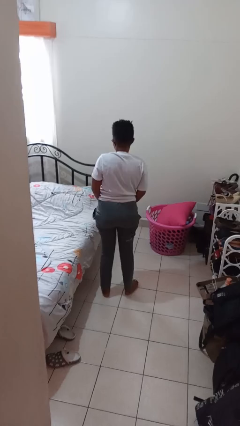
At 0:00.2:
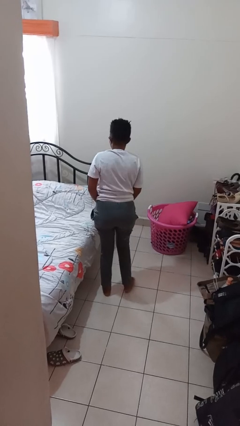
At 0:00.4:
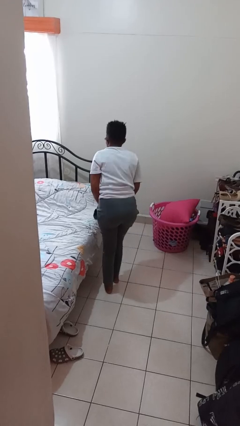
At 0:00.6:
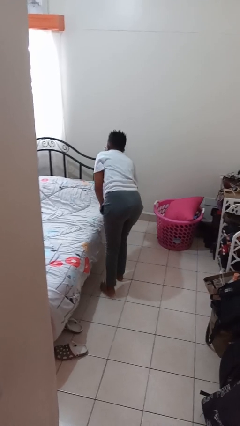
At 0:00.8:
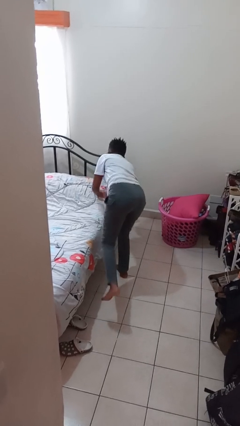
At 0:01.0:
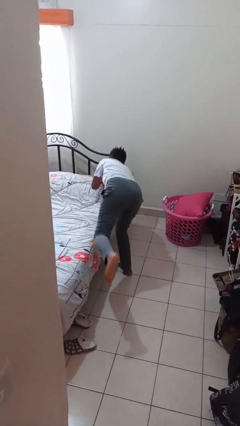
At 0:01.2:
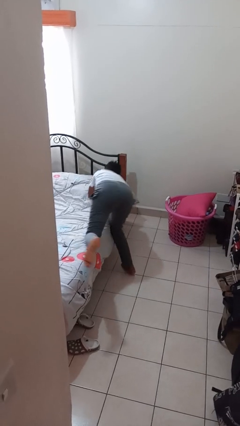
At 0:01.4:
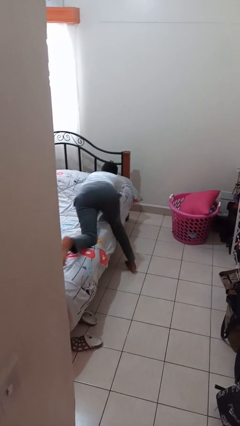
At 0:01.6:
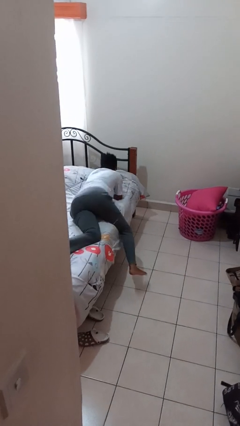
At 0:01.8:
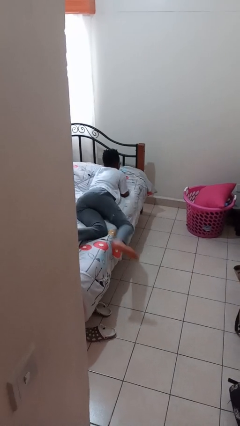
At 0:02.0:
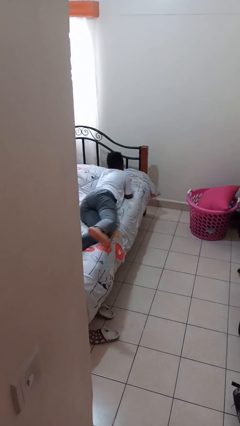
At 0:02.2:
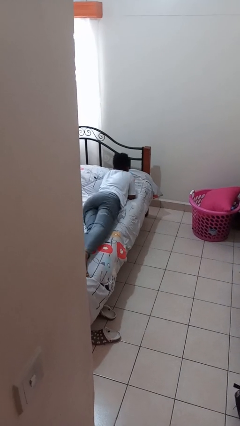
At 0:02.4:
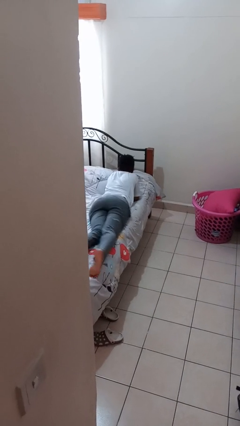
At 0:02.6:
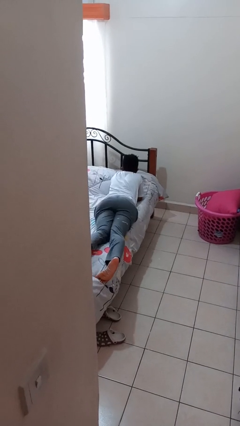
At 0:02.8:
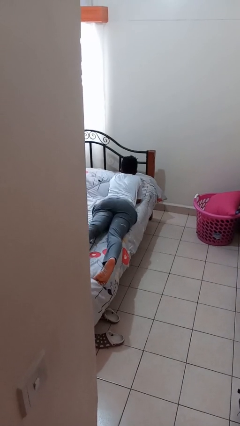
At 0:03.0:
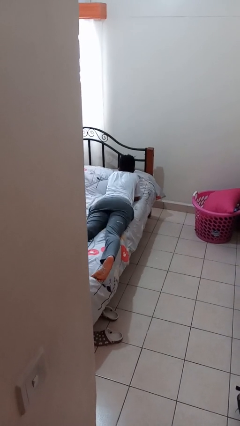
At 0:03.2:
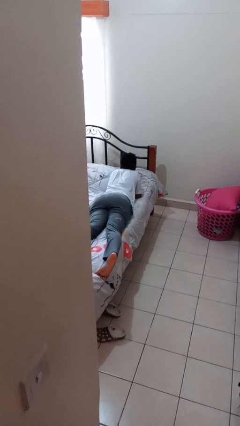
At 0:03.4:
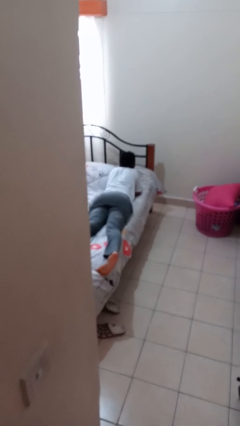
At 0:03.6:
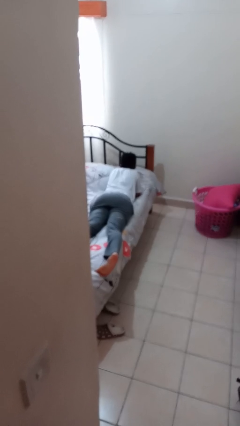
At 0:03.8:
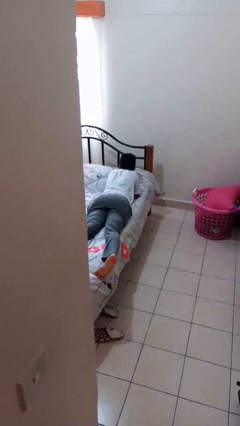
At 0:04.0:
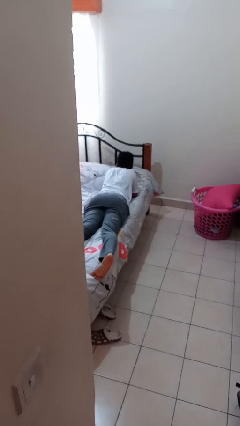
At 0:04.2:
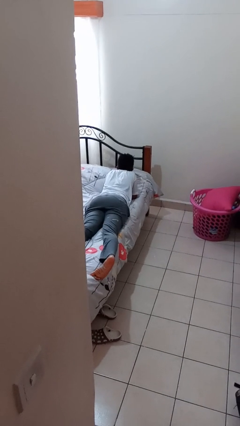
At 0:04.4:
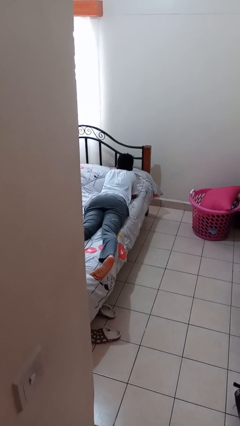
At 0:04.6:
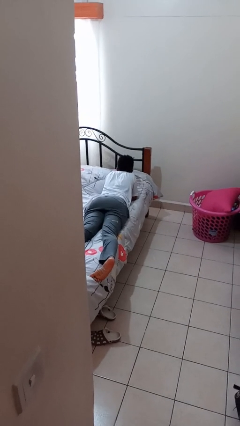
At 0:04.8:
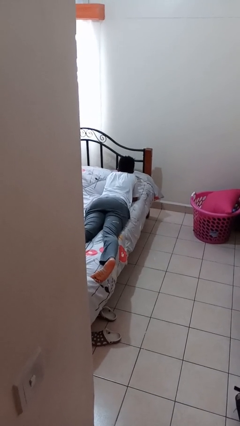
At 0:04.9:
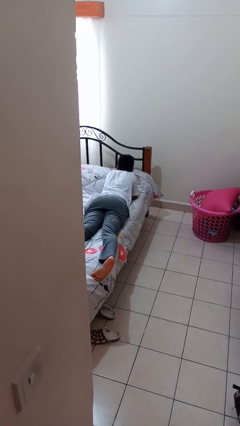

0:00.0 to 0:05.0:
person lies down on bed

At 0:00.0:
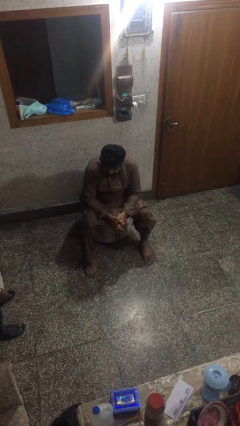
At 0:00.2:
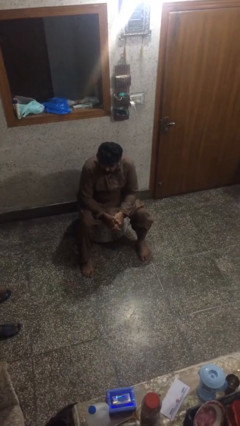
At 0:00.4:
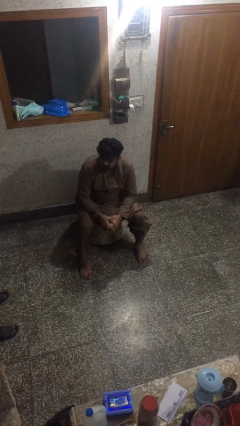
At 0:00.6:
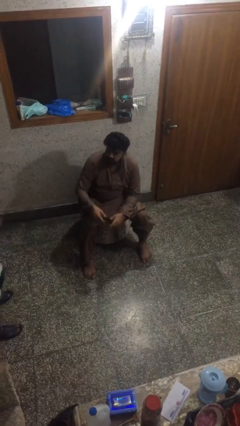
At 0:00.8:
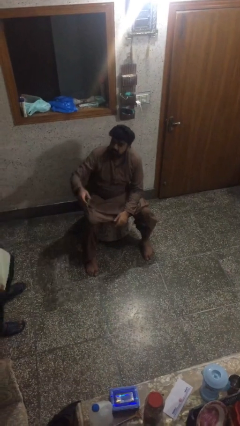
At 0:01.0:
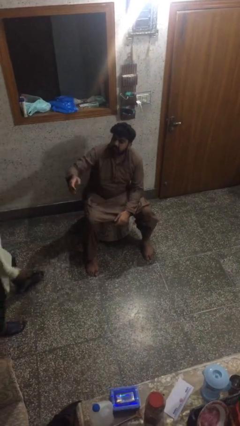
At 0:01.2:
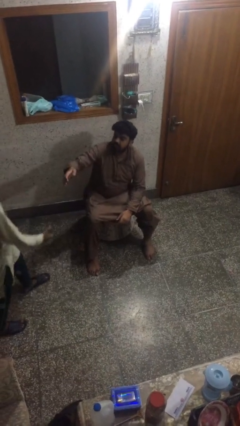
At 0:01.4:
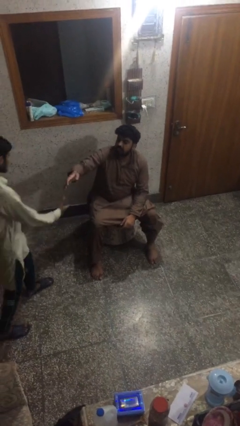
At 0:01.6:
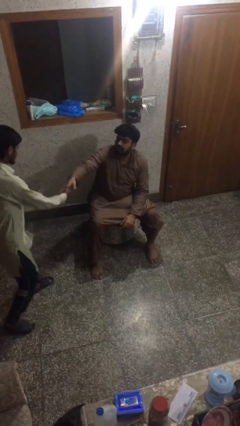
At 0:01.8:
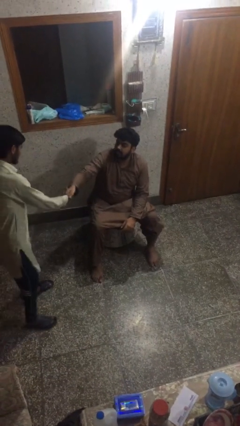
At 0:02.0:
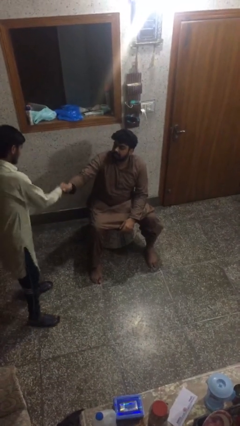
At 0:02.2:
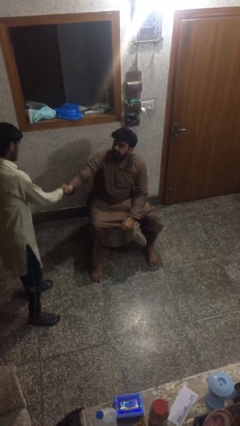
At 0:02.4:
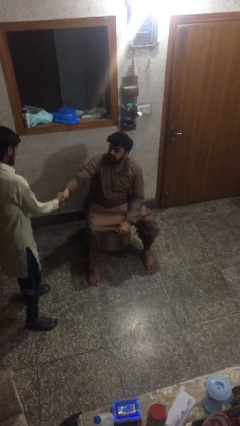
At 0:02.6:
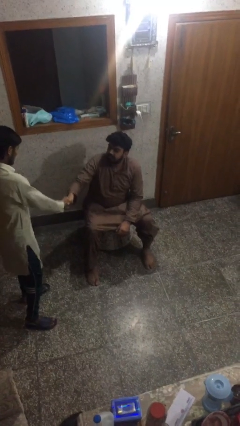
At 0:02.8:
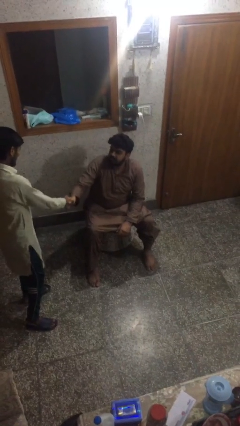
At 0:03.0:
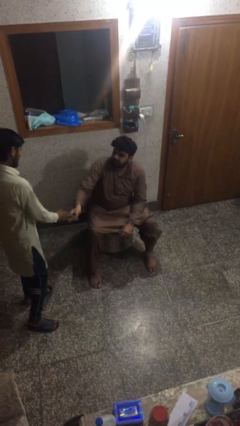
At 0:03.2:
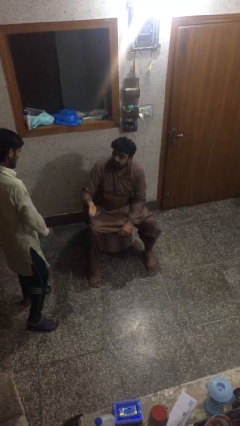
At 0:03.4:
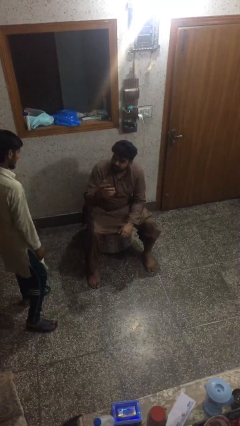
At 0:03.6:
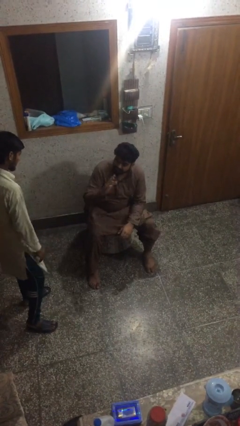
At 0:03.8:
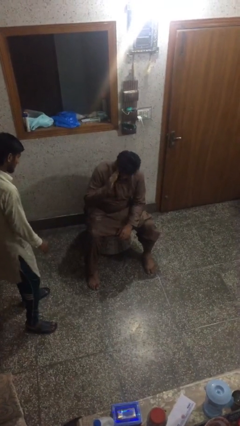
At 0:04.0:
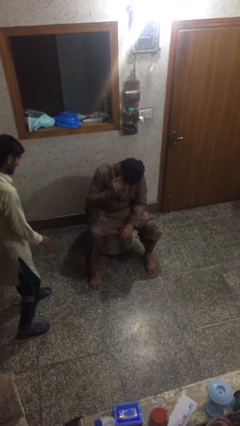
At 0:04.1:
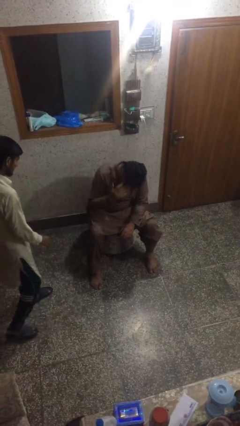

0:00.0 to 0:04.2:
person shakes hand

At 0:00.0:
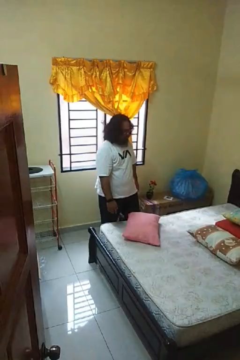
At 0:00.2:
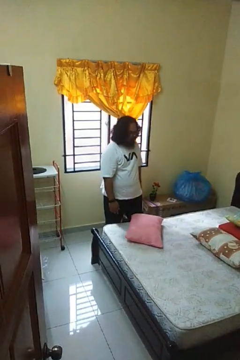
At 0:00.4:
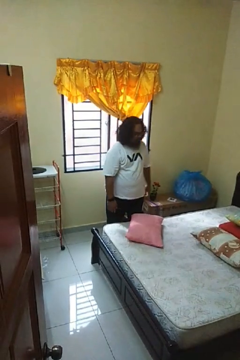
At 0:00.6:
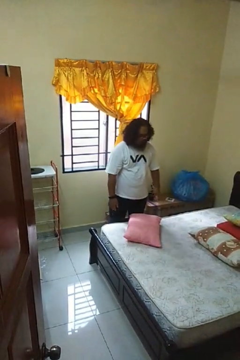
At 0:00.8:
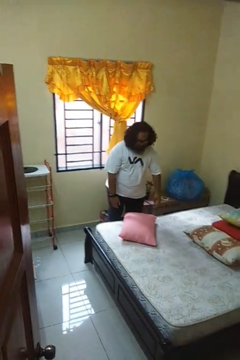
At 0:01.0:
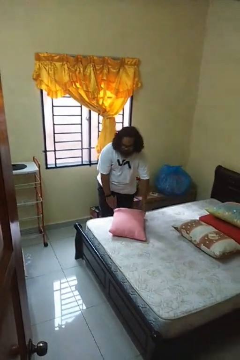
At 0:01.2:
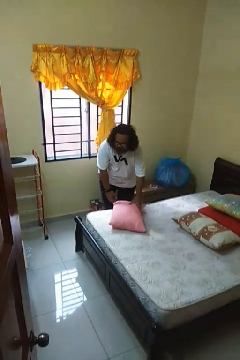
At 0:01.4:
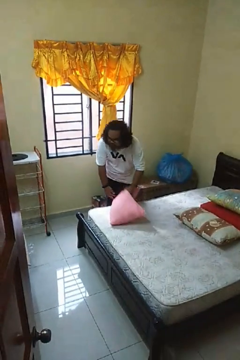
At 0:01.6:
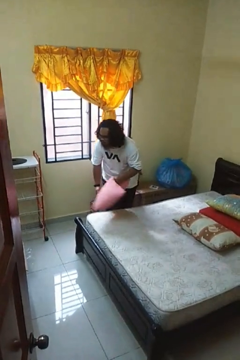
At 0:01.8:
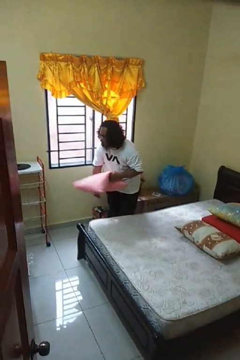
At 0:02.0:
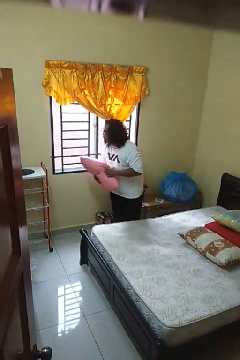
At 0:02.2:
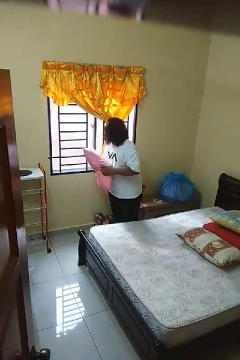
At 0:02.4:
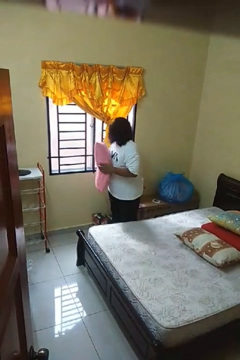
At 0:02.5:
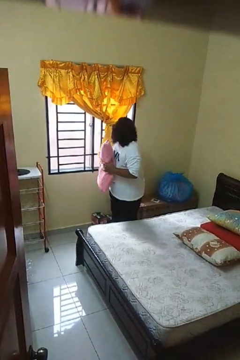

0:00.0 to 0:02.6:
person picks up object from bed

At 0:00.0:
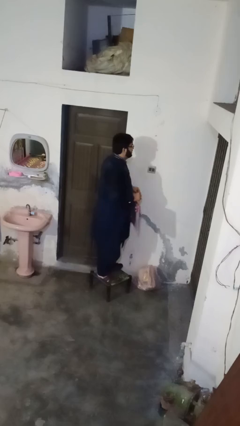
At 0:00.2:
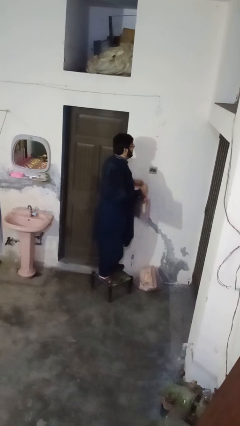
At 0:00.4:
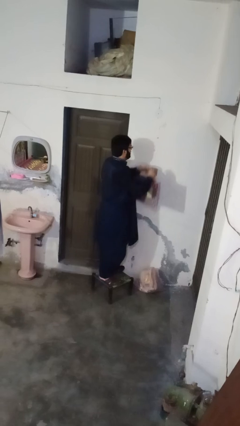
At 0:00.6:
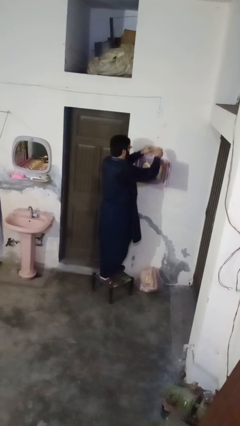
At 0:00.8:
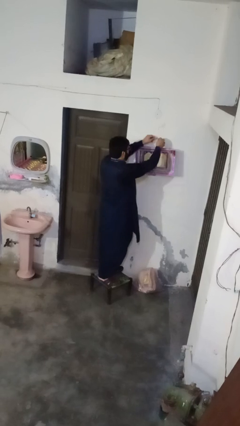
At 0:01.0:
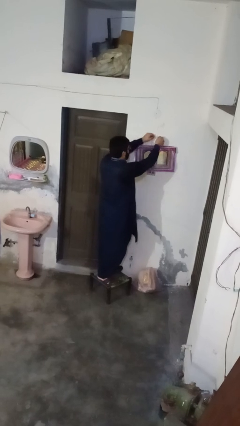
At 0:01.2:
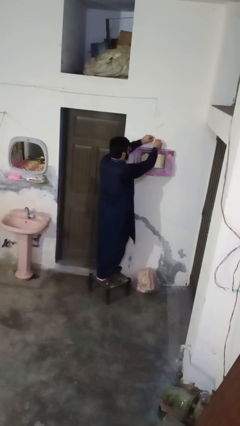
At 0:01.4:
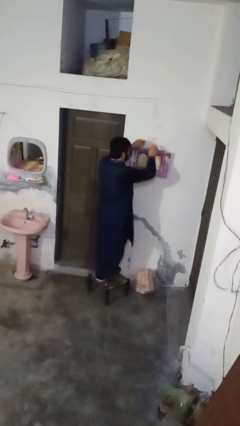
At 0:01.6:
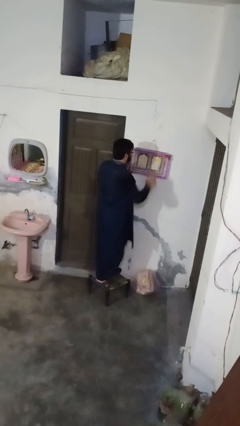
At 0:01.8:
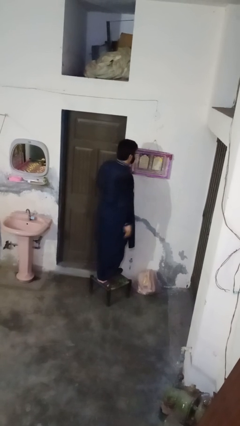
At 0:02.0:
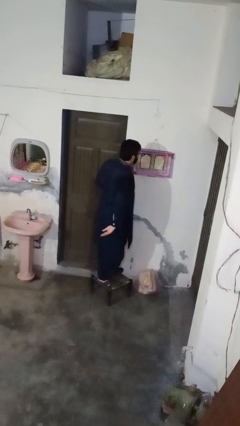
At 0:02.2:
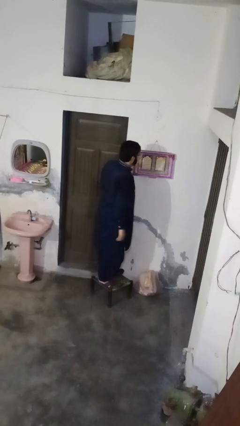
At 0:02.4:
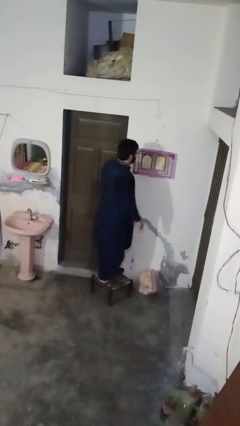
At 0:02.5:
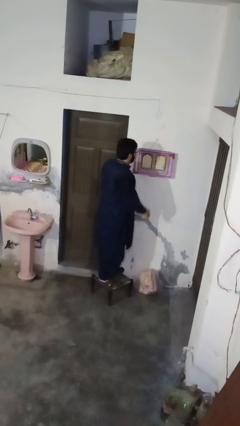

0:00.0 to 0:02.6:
person puts up picture frame

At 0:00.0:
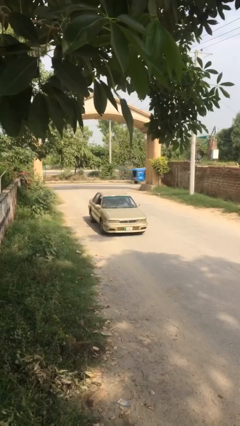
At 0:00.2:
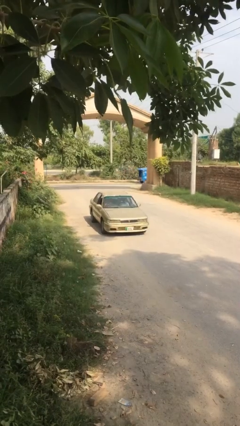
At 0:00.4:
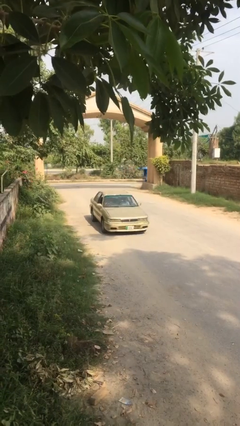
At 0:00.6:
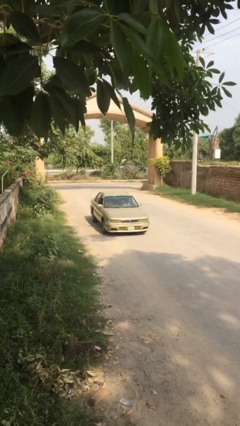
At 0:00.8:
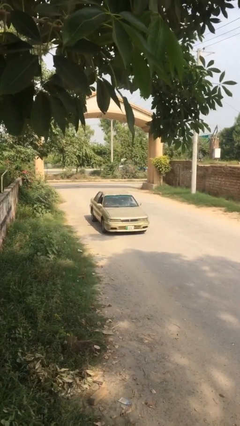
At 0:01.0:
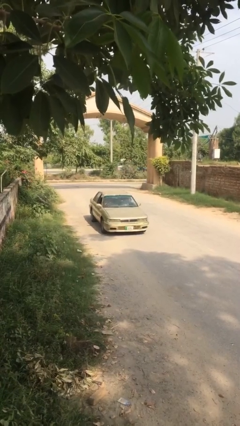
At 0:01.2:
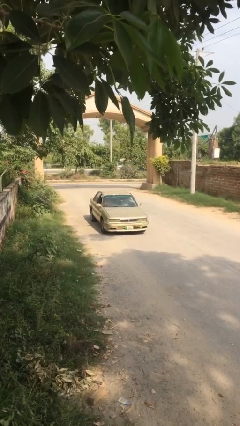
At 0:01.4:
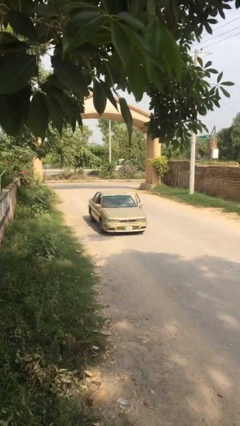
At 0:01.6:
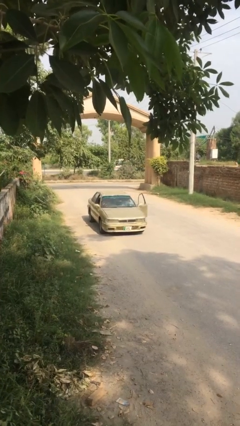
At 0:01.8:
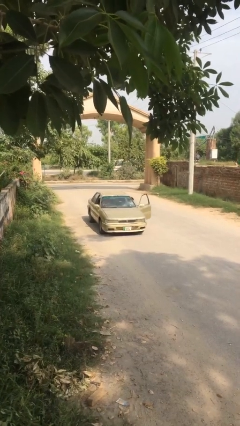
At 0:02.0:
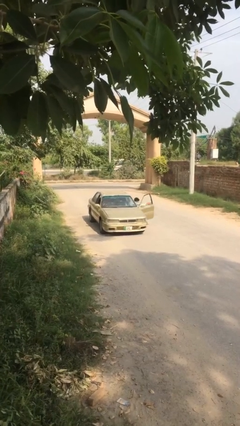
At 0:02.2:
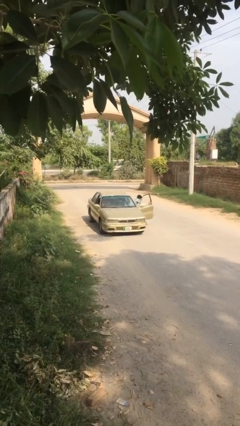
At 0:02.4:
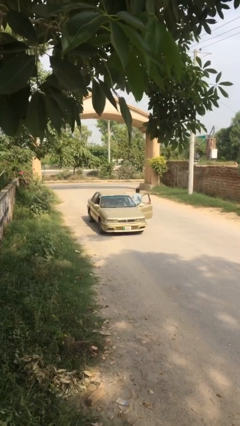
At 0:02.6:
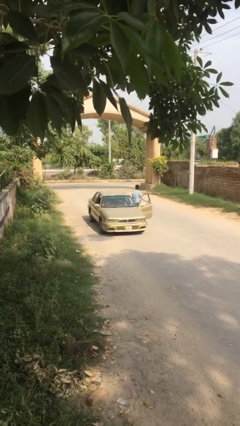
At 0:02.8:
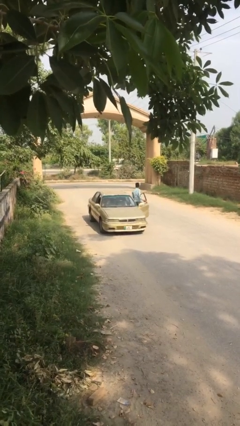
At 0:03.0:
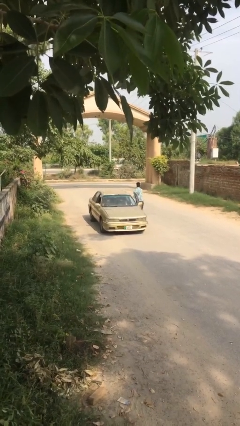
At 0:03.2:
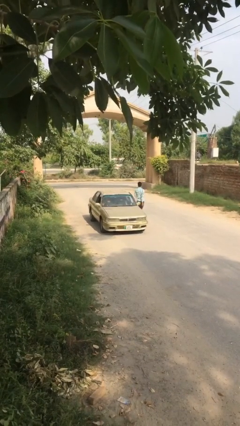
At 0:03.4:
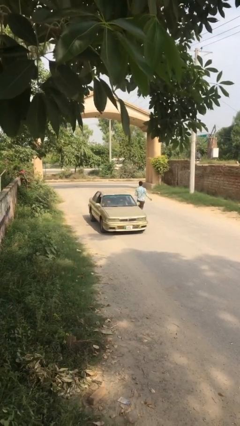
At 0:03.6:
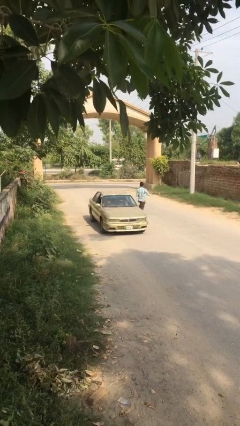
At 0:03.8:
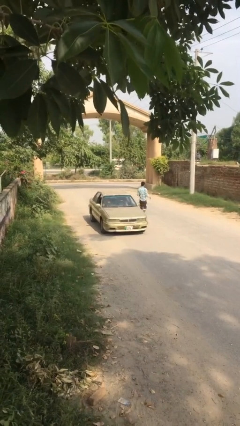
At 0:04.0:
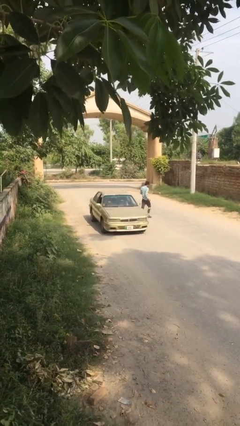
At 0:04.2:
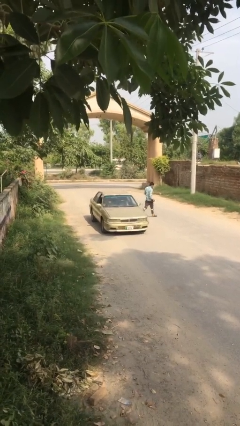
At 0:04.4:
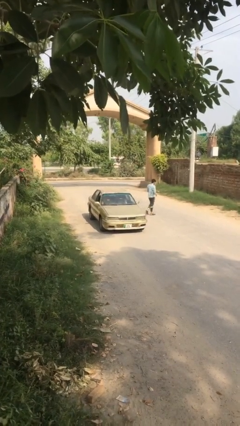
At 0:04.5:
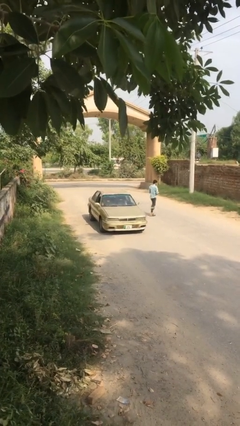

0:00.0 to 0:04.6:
car drops off person
